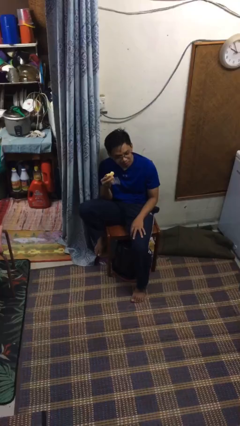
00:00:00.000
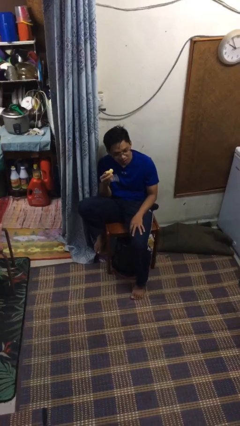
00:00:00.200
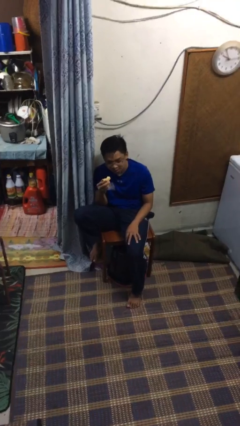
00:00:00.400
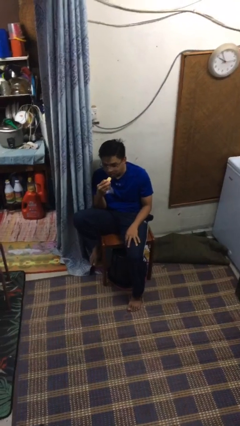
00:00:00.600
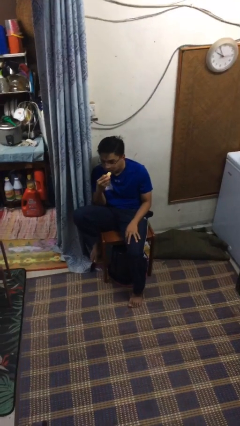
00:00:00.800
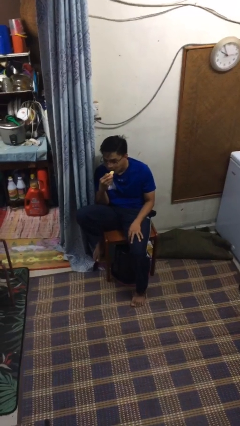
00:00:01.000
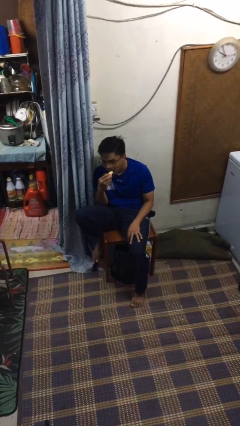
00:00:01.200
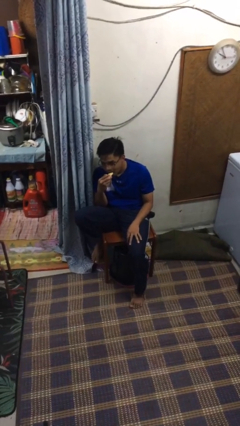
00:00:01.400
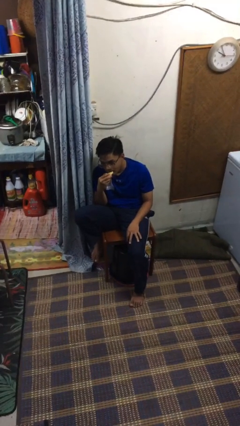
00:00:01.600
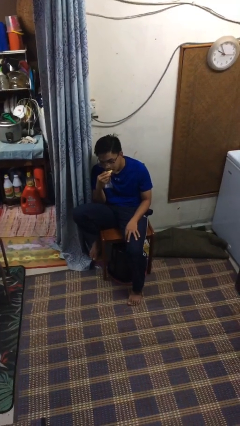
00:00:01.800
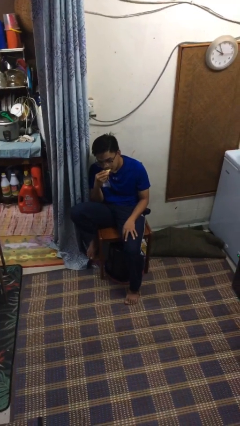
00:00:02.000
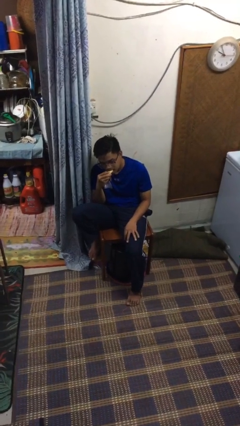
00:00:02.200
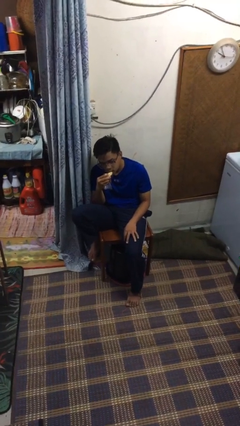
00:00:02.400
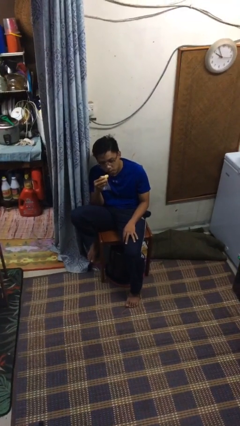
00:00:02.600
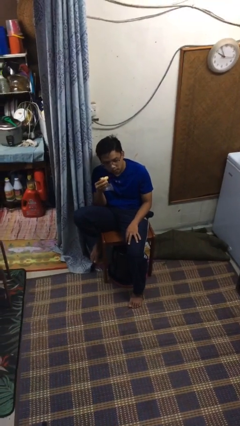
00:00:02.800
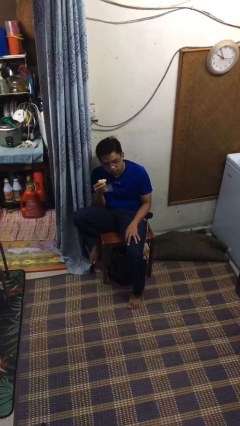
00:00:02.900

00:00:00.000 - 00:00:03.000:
person eats banana

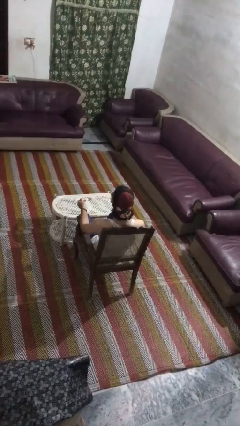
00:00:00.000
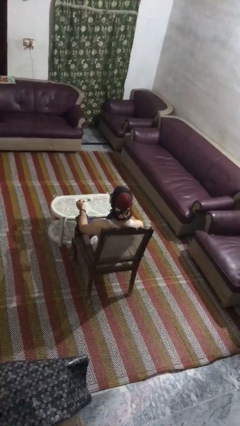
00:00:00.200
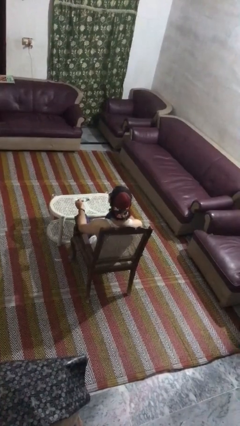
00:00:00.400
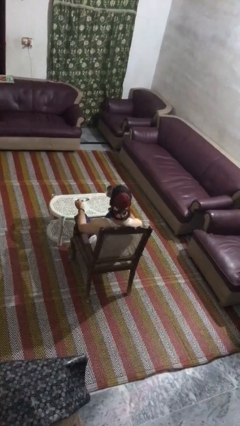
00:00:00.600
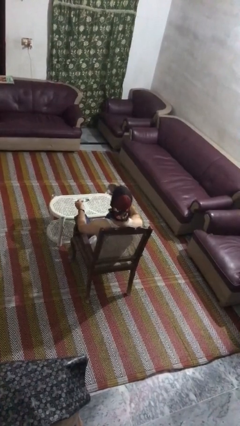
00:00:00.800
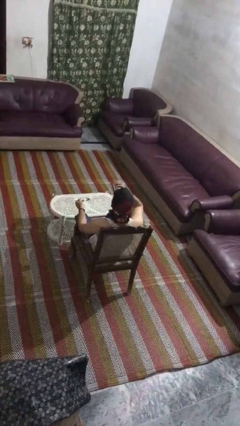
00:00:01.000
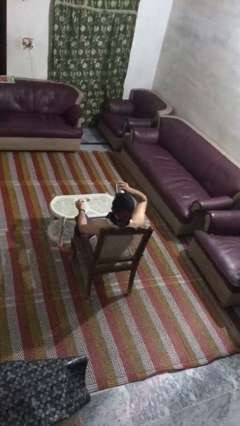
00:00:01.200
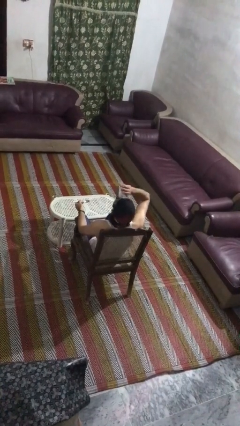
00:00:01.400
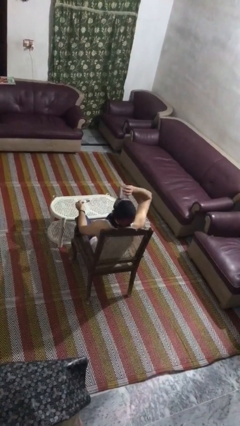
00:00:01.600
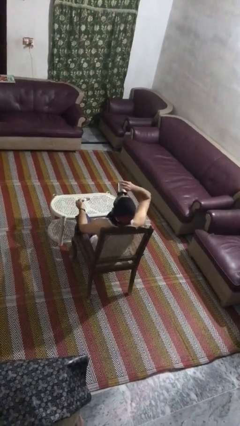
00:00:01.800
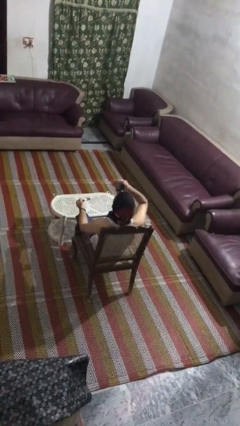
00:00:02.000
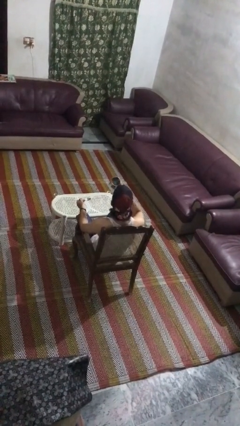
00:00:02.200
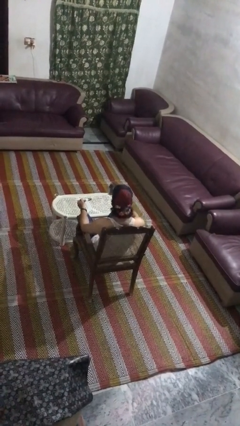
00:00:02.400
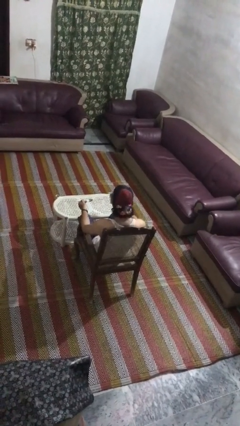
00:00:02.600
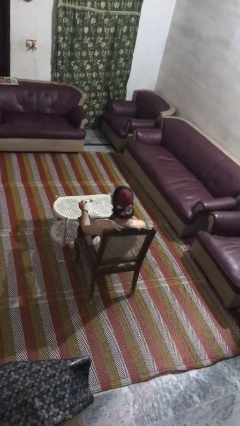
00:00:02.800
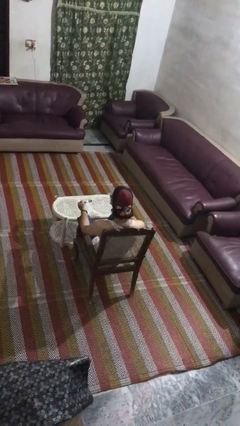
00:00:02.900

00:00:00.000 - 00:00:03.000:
person drinks from mug

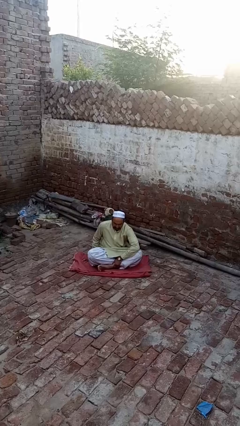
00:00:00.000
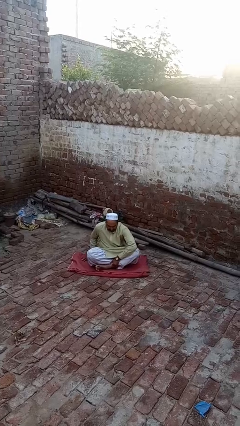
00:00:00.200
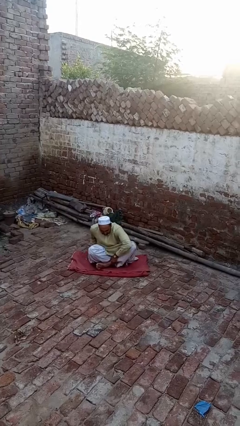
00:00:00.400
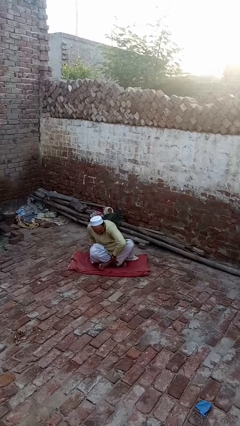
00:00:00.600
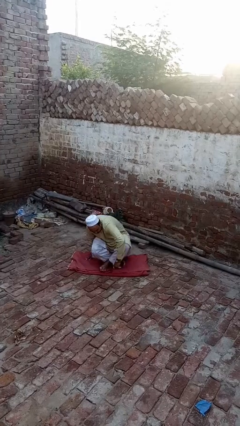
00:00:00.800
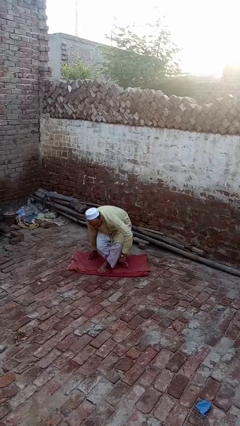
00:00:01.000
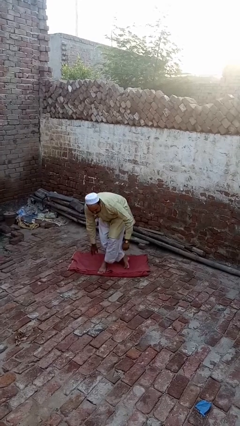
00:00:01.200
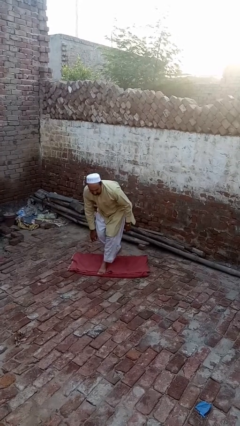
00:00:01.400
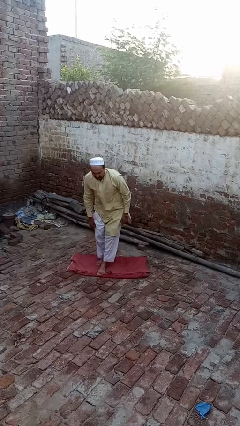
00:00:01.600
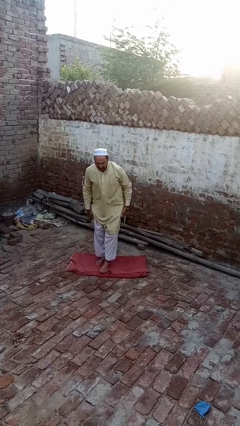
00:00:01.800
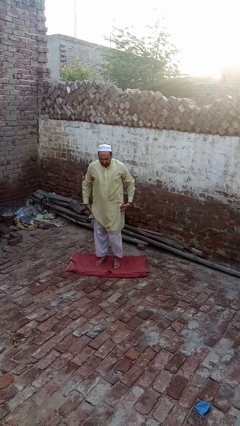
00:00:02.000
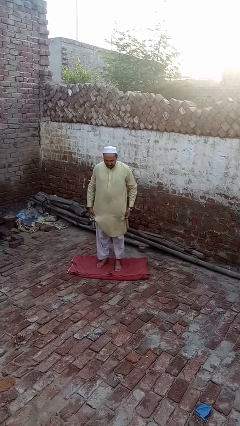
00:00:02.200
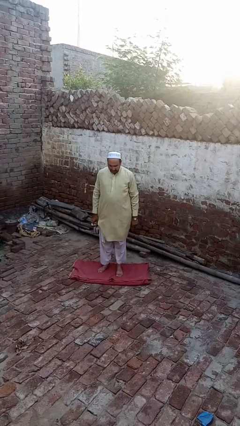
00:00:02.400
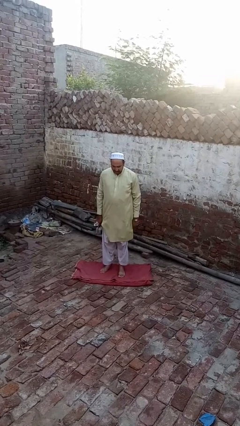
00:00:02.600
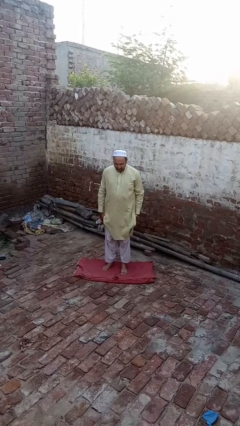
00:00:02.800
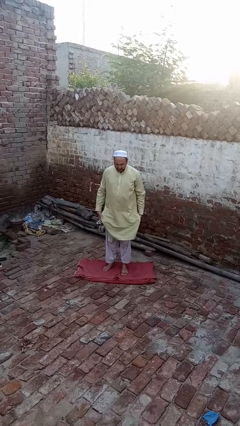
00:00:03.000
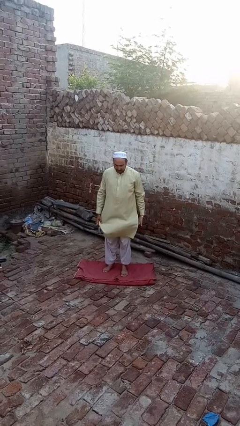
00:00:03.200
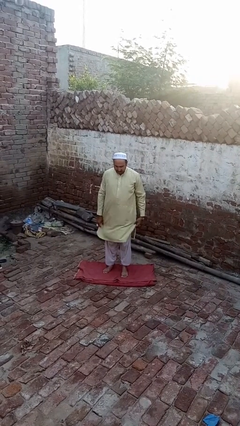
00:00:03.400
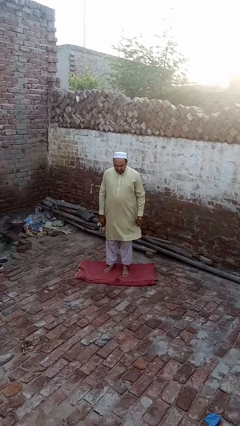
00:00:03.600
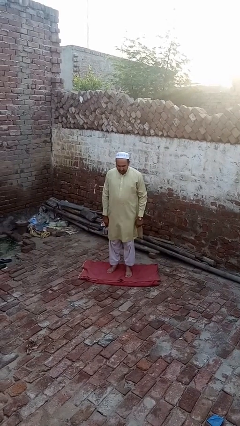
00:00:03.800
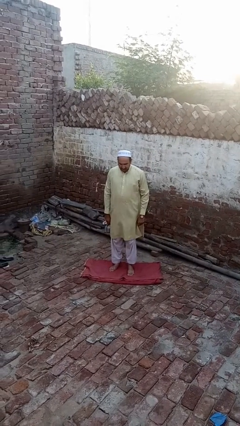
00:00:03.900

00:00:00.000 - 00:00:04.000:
person stands up from floor

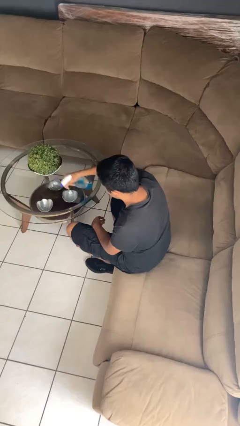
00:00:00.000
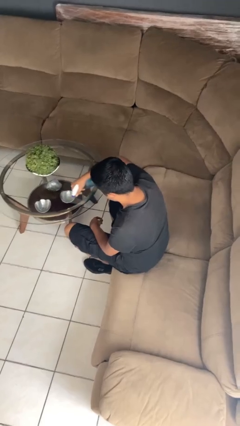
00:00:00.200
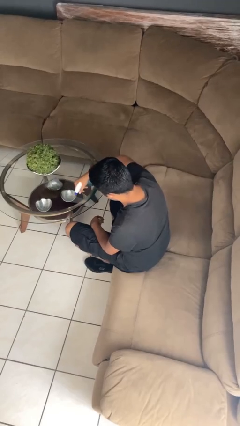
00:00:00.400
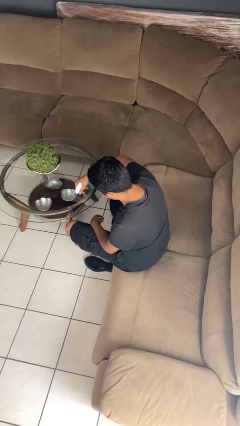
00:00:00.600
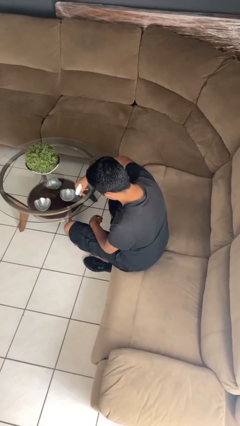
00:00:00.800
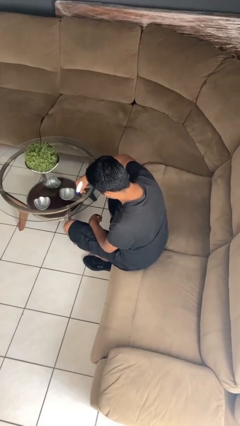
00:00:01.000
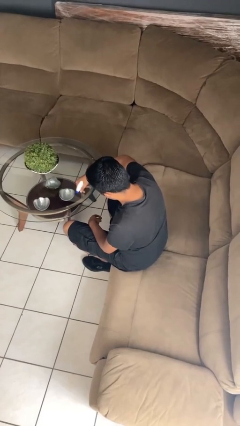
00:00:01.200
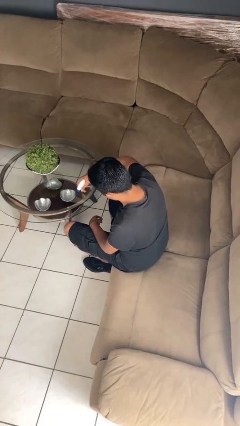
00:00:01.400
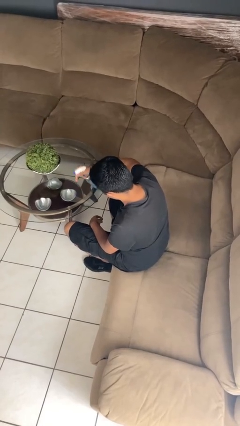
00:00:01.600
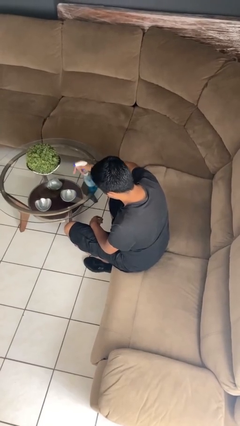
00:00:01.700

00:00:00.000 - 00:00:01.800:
person sprays from bottle

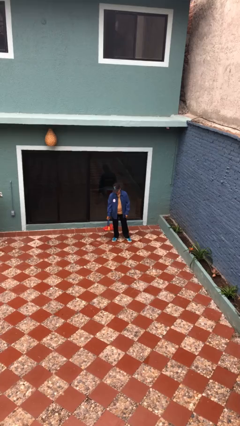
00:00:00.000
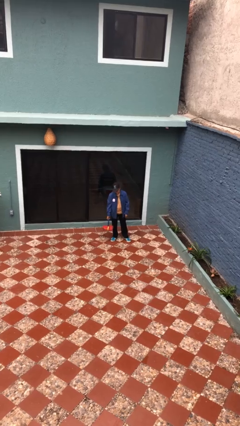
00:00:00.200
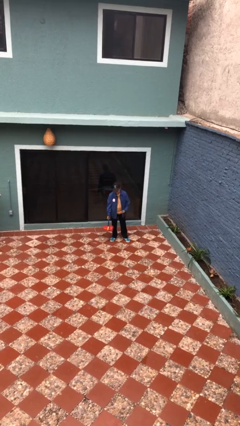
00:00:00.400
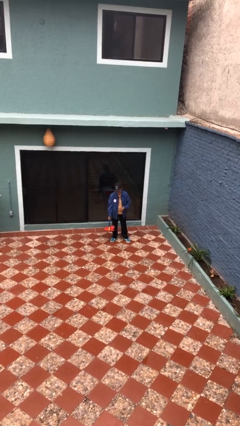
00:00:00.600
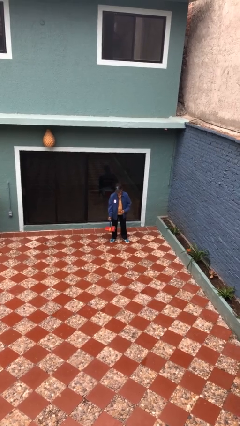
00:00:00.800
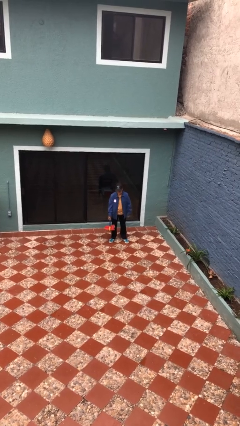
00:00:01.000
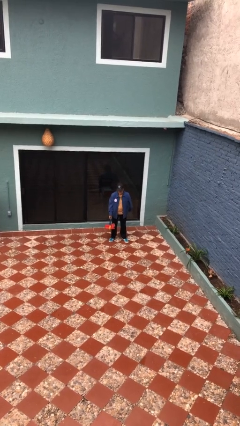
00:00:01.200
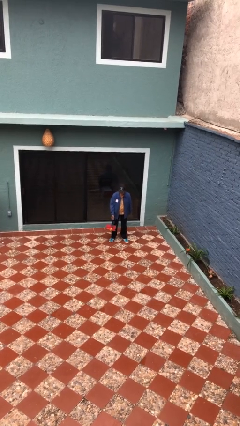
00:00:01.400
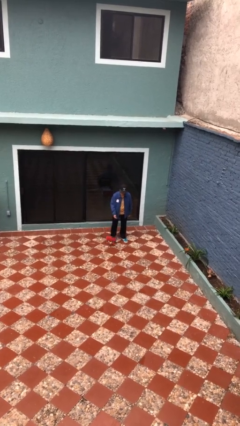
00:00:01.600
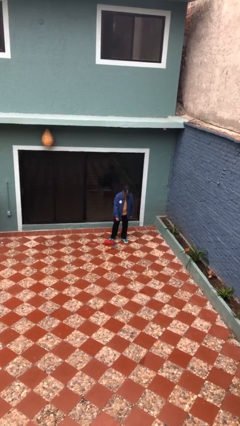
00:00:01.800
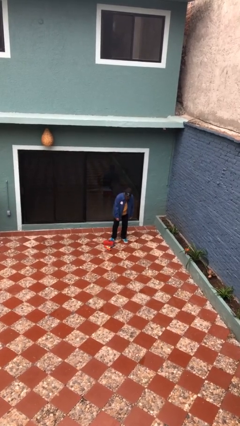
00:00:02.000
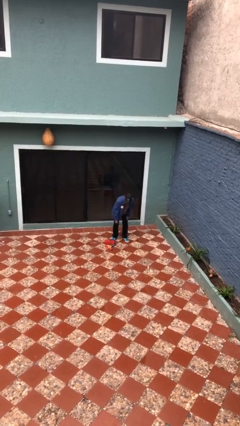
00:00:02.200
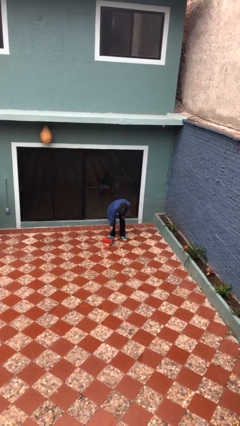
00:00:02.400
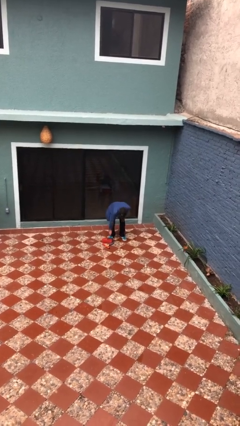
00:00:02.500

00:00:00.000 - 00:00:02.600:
person drops object

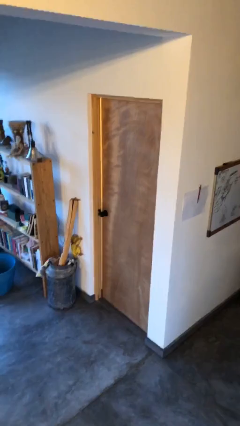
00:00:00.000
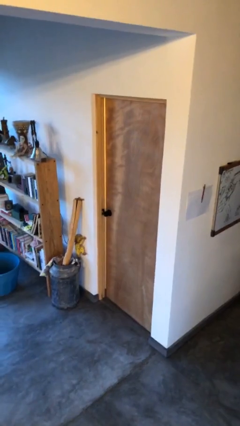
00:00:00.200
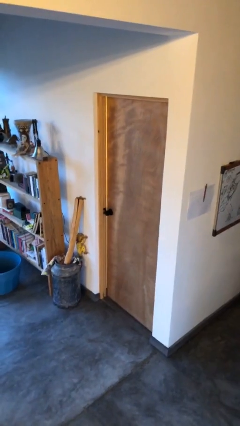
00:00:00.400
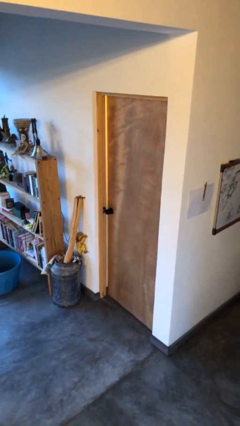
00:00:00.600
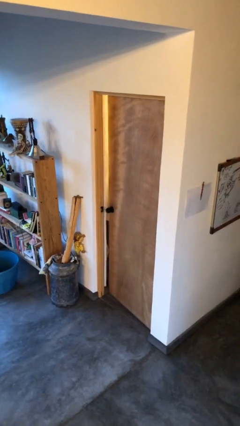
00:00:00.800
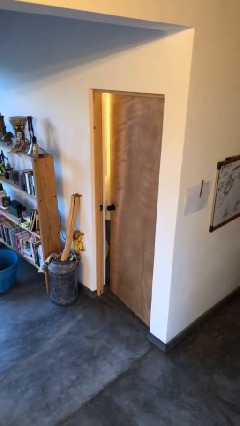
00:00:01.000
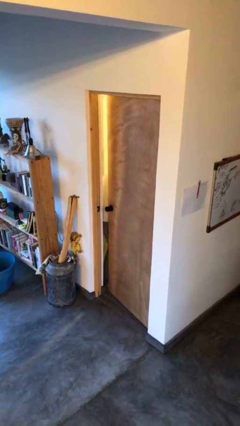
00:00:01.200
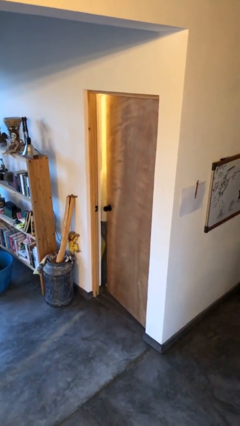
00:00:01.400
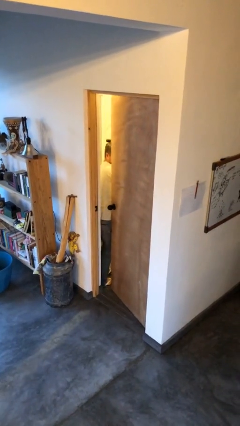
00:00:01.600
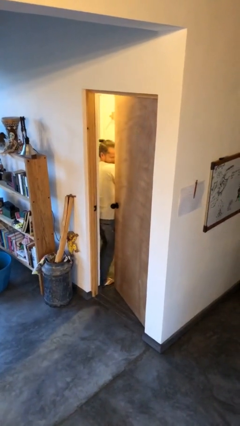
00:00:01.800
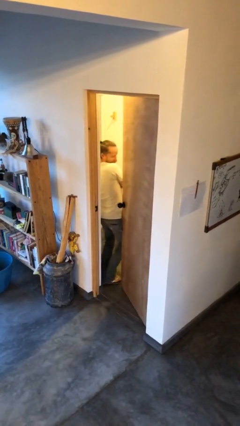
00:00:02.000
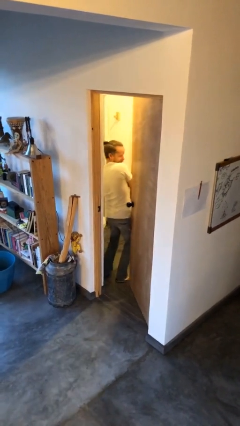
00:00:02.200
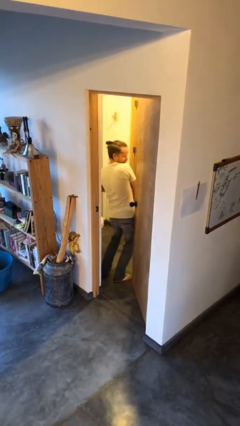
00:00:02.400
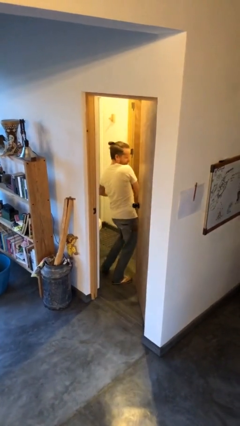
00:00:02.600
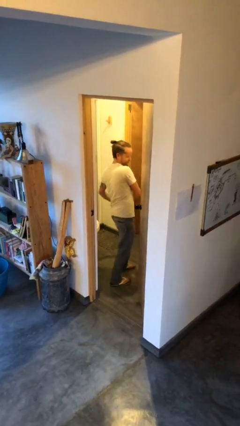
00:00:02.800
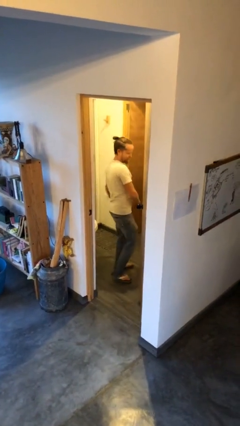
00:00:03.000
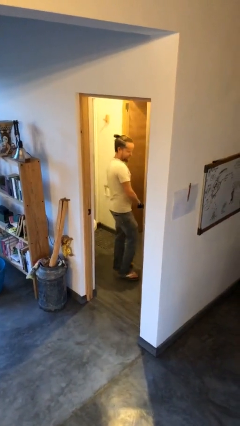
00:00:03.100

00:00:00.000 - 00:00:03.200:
person opens facility door
